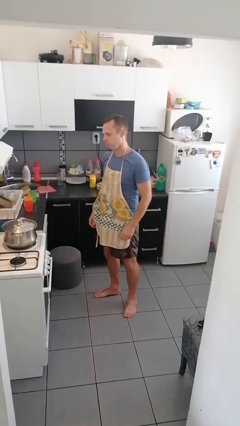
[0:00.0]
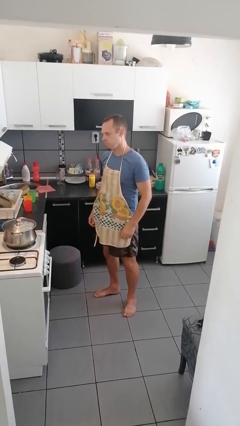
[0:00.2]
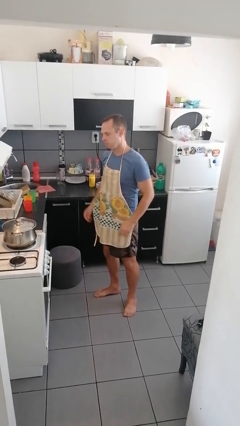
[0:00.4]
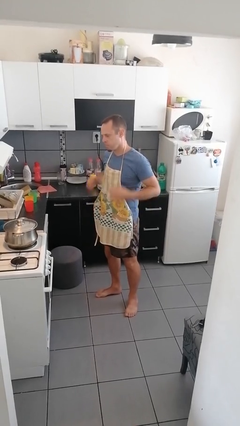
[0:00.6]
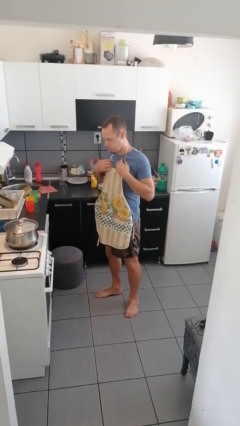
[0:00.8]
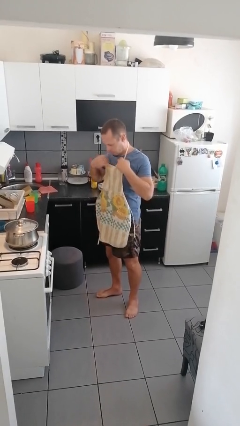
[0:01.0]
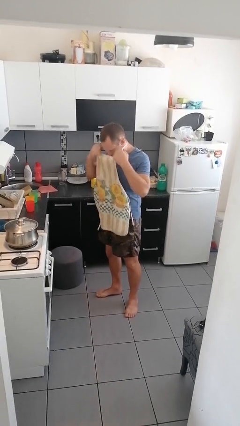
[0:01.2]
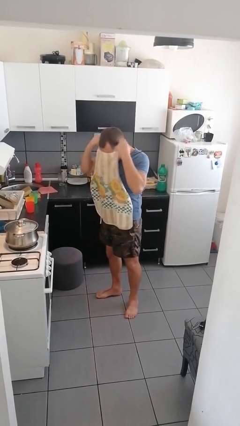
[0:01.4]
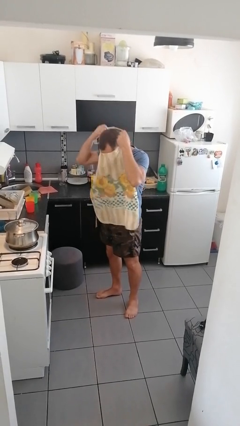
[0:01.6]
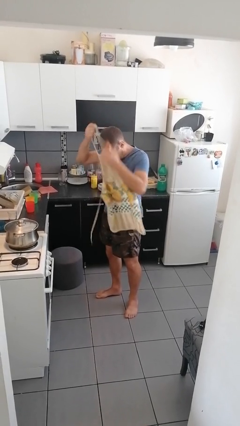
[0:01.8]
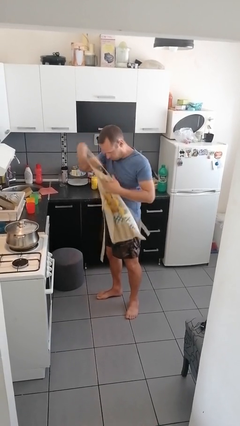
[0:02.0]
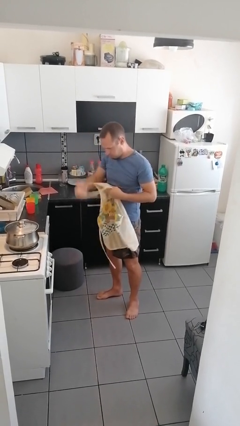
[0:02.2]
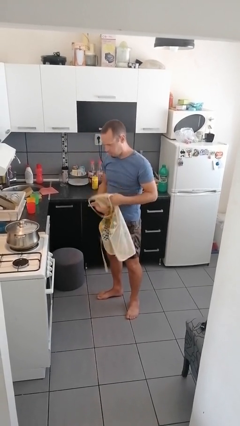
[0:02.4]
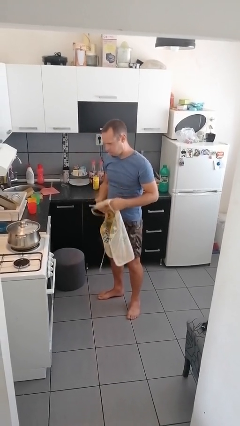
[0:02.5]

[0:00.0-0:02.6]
person takes off apron

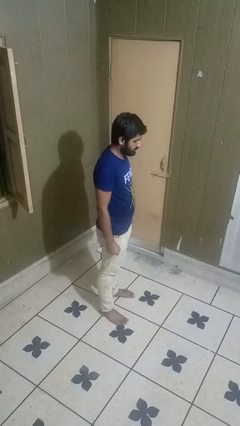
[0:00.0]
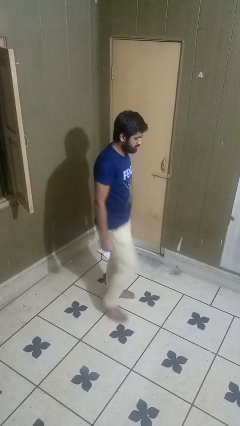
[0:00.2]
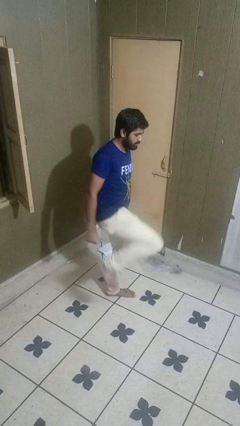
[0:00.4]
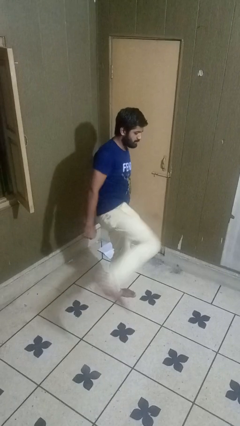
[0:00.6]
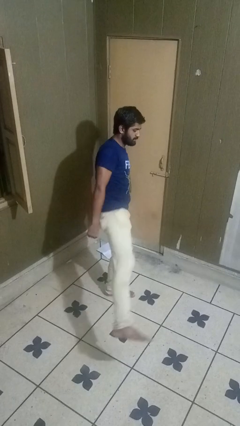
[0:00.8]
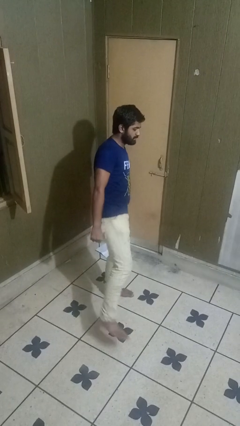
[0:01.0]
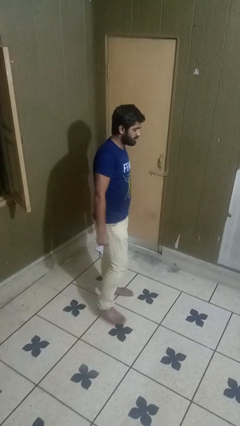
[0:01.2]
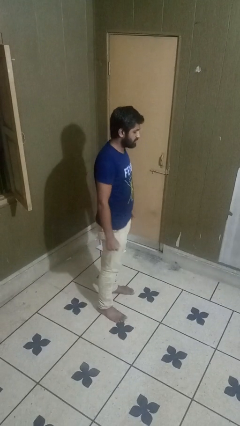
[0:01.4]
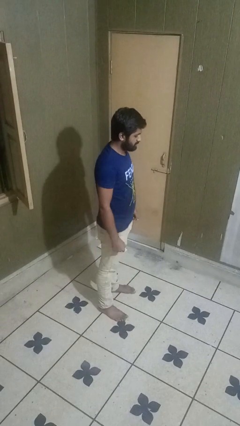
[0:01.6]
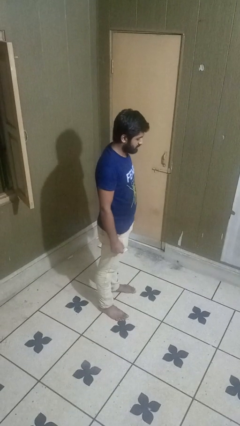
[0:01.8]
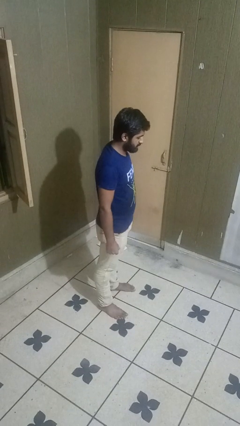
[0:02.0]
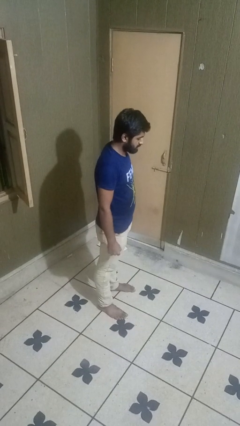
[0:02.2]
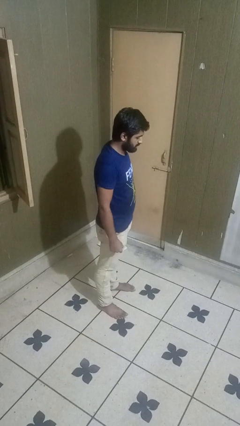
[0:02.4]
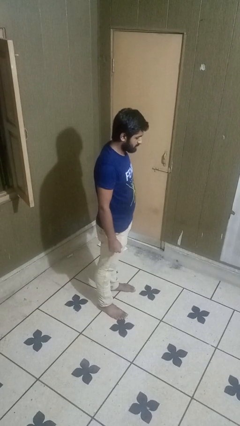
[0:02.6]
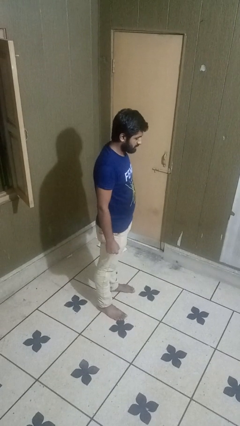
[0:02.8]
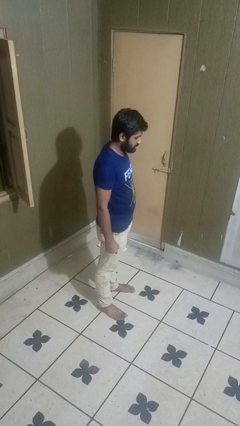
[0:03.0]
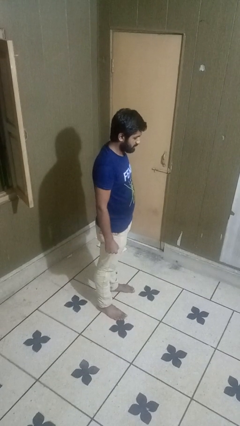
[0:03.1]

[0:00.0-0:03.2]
person karate kicks

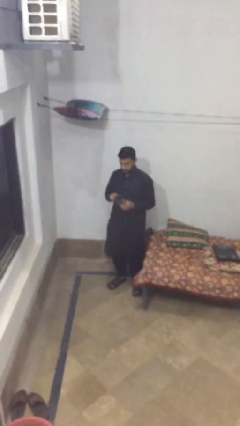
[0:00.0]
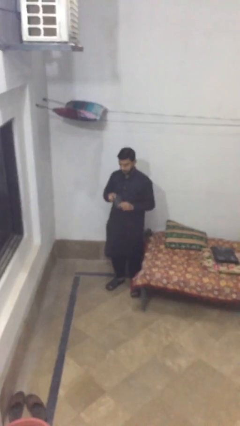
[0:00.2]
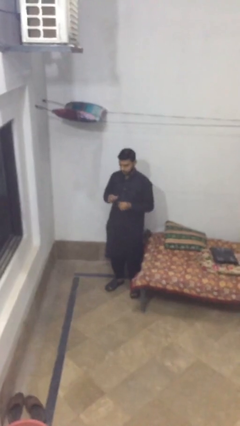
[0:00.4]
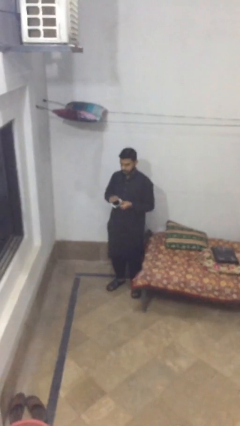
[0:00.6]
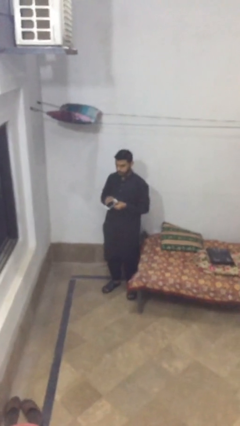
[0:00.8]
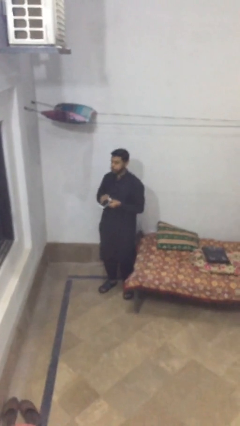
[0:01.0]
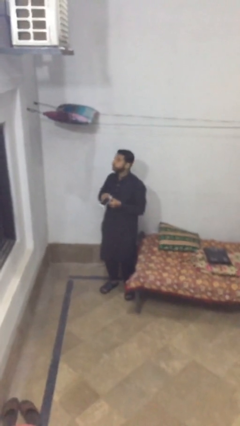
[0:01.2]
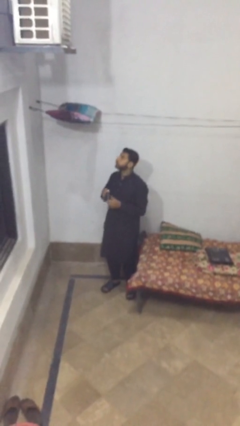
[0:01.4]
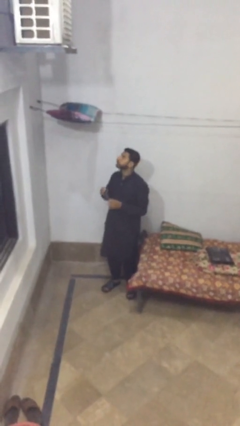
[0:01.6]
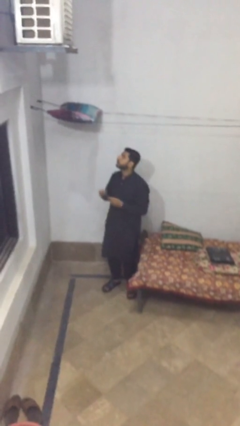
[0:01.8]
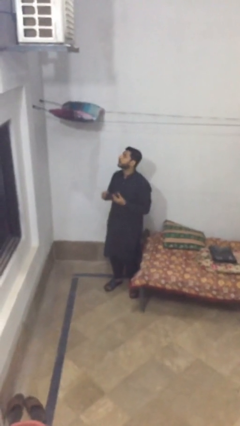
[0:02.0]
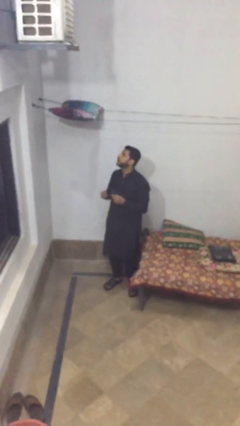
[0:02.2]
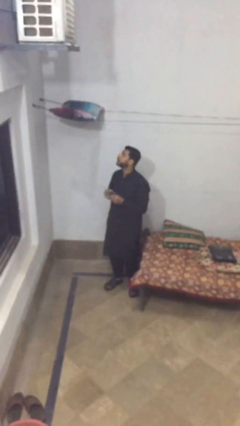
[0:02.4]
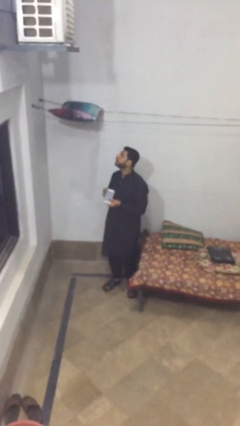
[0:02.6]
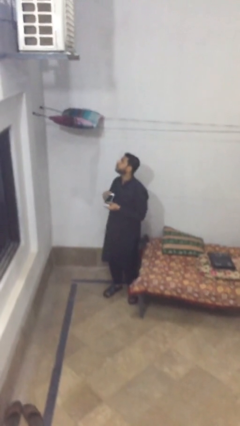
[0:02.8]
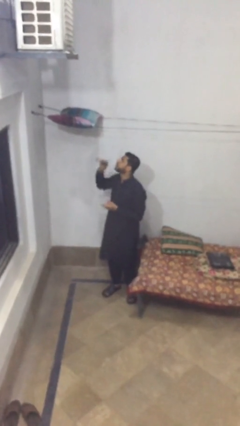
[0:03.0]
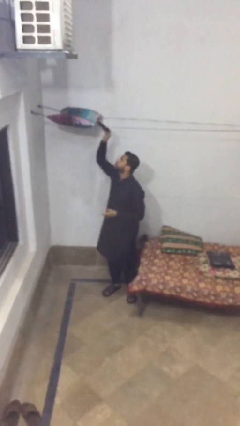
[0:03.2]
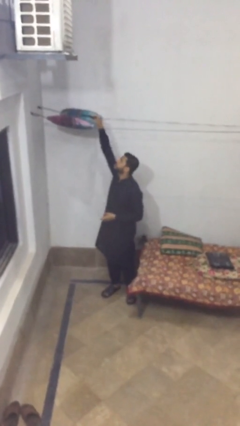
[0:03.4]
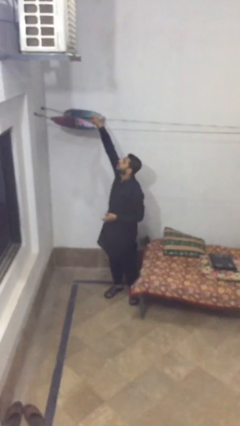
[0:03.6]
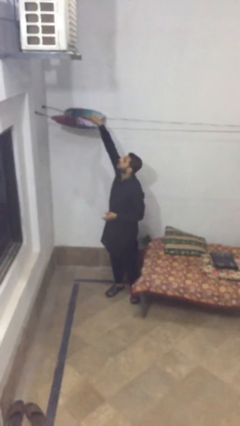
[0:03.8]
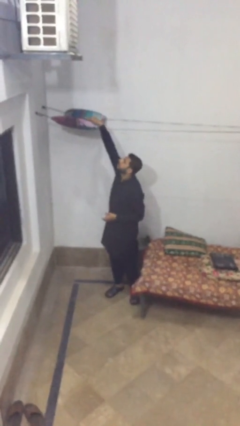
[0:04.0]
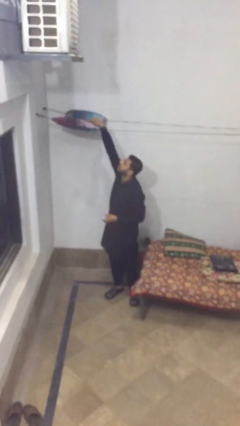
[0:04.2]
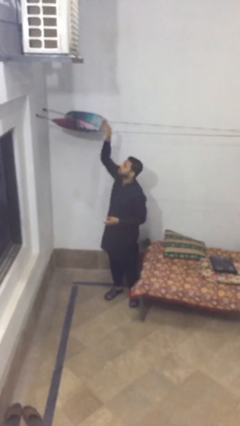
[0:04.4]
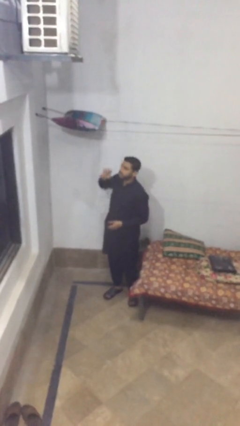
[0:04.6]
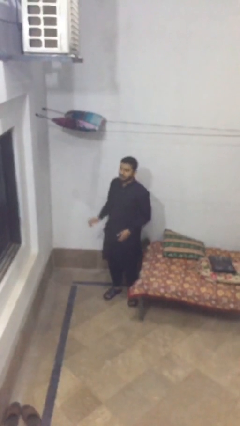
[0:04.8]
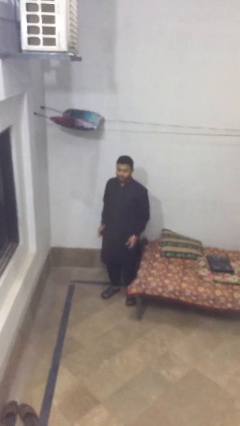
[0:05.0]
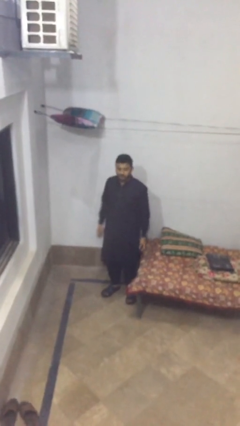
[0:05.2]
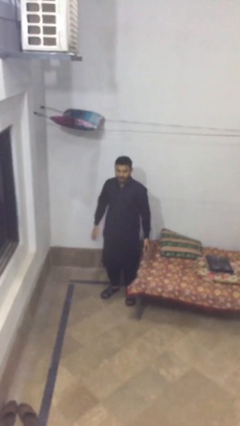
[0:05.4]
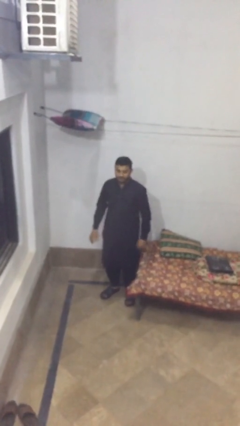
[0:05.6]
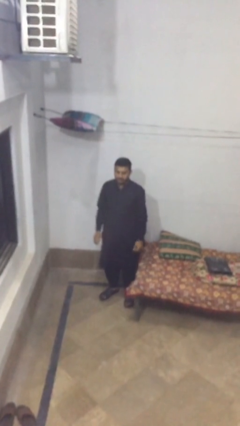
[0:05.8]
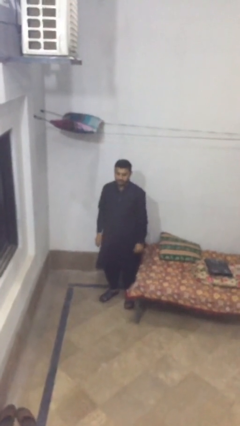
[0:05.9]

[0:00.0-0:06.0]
person puts down object on shelf

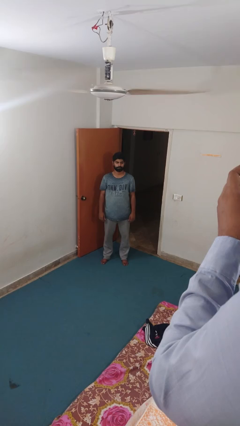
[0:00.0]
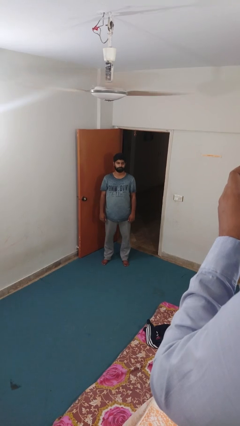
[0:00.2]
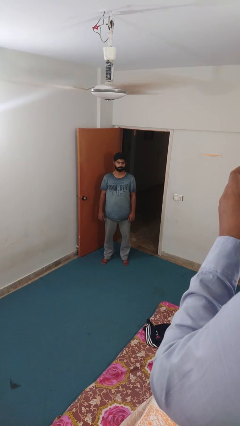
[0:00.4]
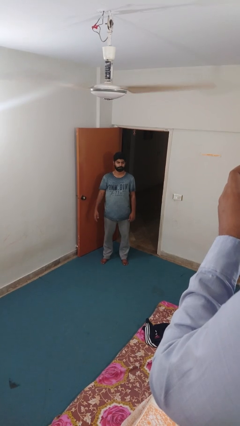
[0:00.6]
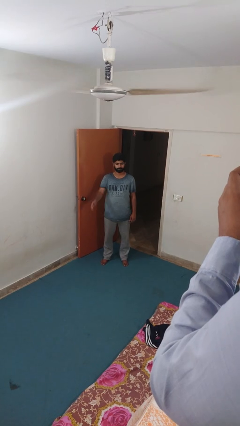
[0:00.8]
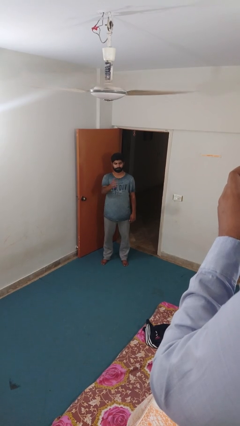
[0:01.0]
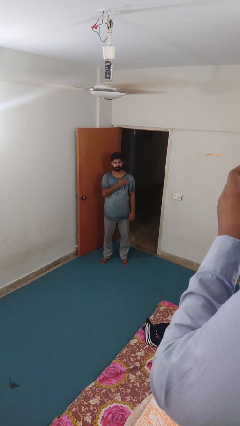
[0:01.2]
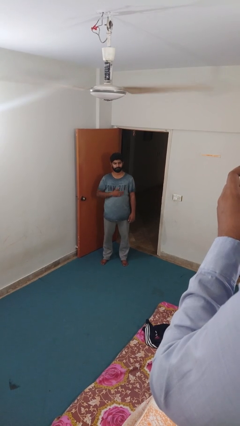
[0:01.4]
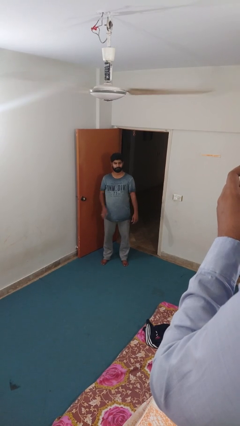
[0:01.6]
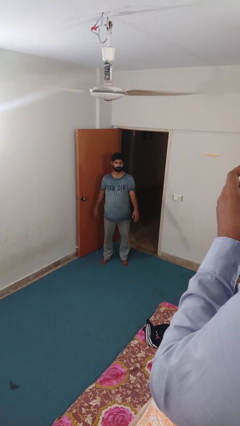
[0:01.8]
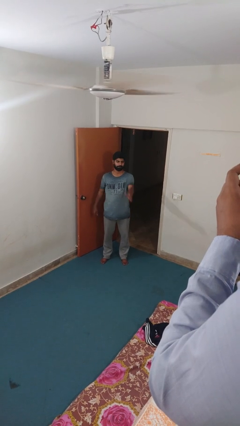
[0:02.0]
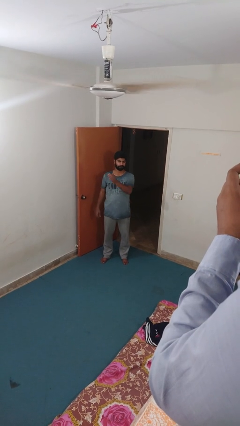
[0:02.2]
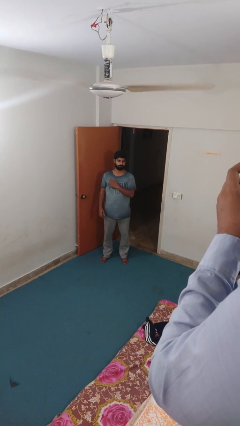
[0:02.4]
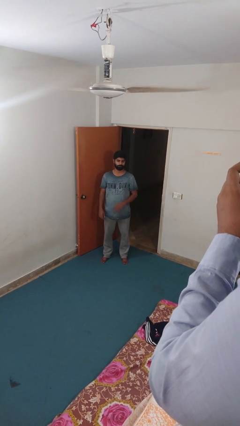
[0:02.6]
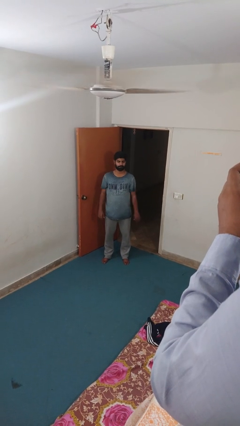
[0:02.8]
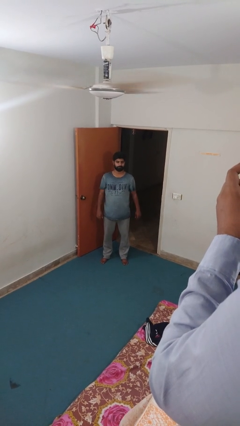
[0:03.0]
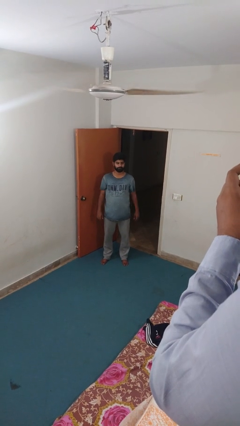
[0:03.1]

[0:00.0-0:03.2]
person drums on chest

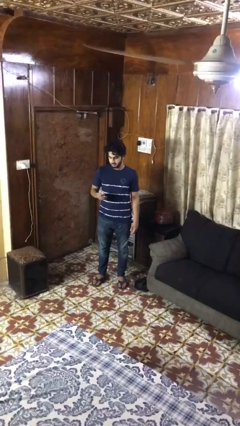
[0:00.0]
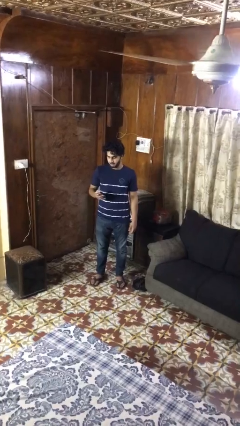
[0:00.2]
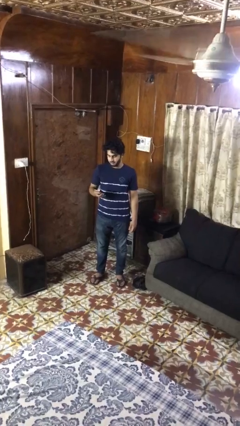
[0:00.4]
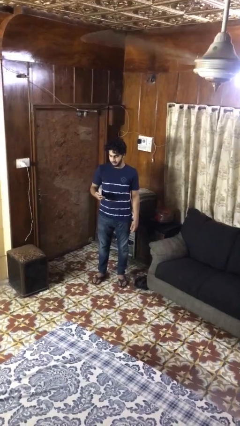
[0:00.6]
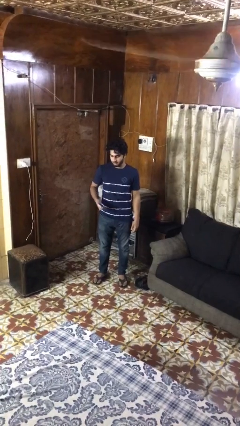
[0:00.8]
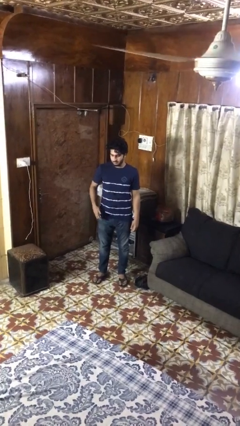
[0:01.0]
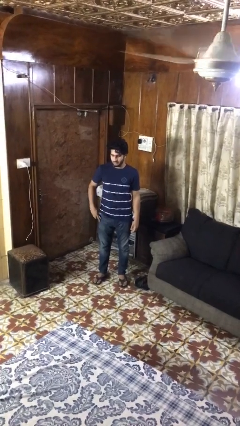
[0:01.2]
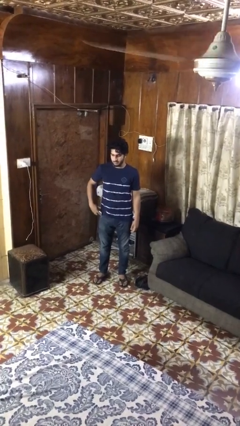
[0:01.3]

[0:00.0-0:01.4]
person puts phone into pocket

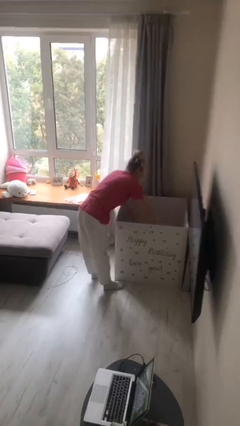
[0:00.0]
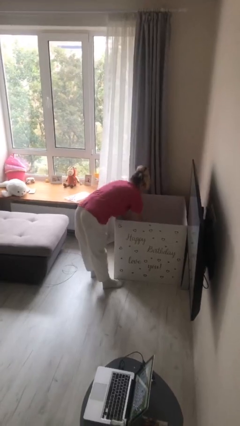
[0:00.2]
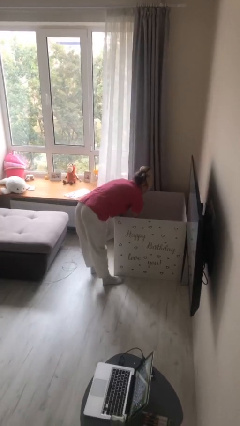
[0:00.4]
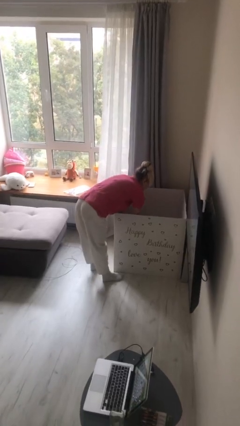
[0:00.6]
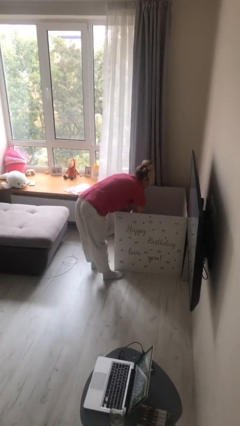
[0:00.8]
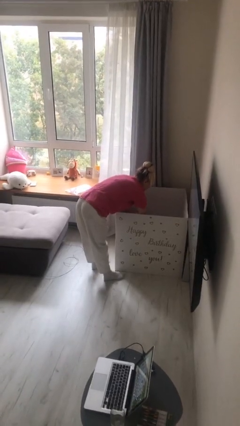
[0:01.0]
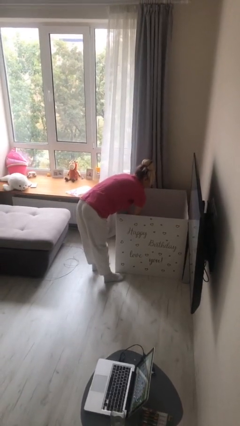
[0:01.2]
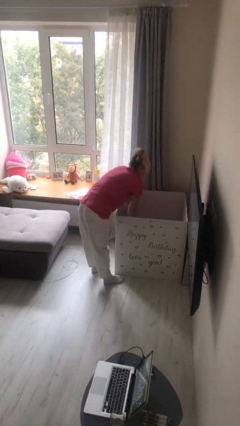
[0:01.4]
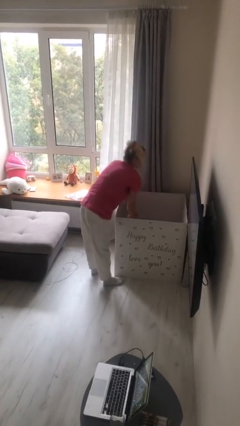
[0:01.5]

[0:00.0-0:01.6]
person searches in box
